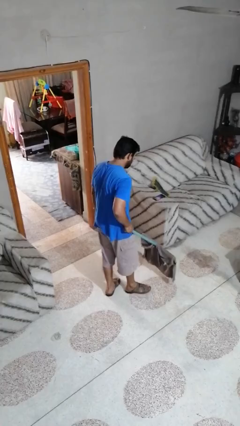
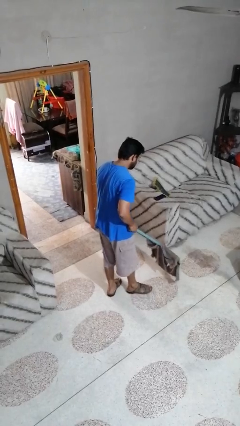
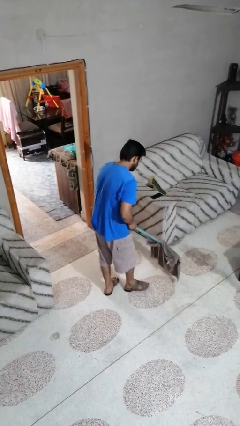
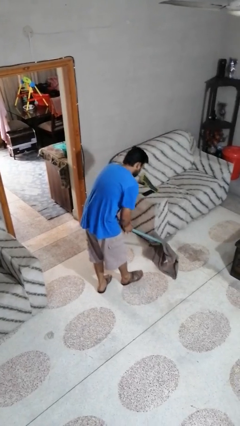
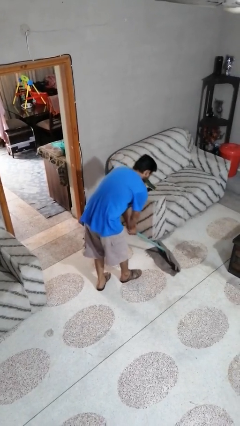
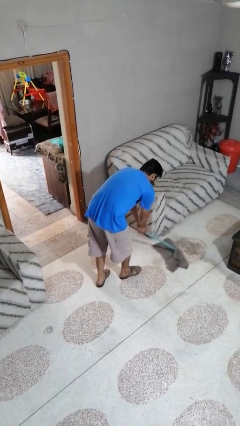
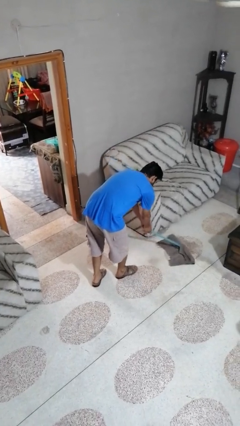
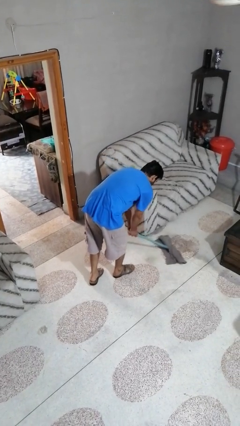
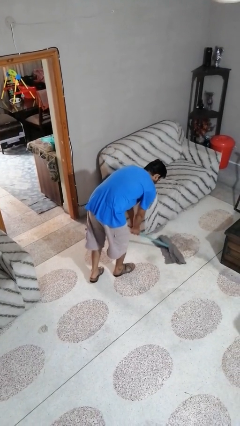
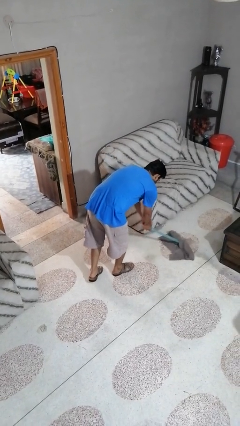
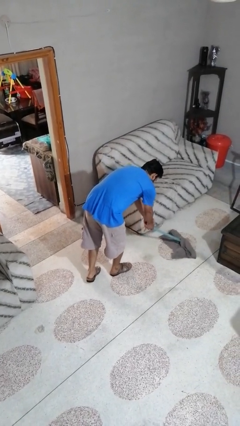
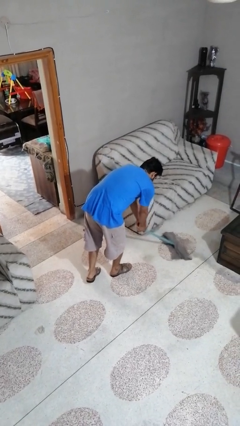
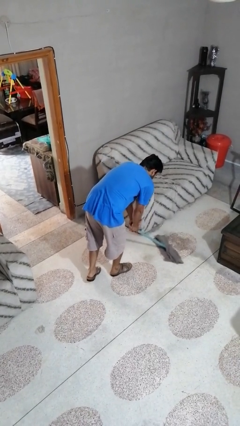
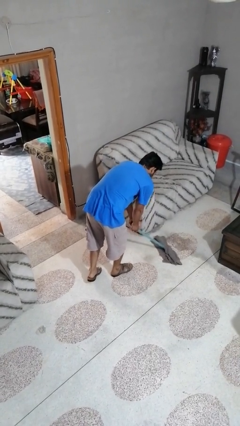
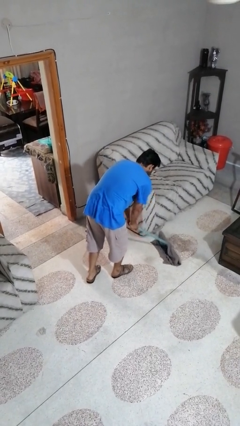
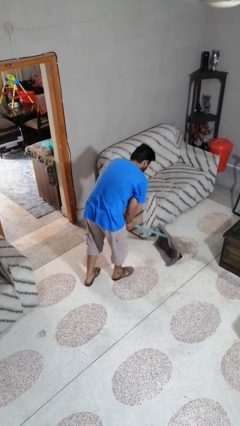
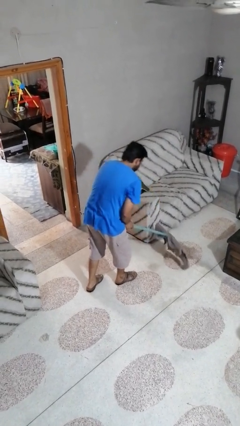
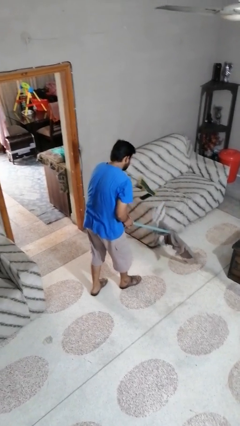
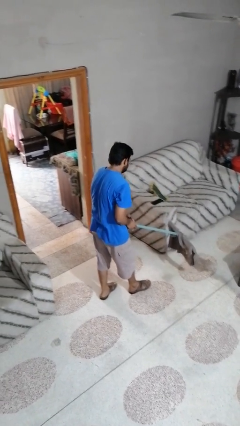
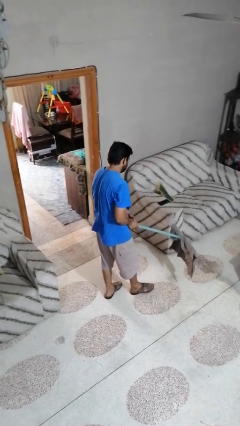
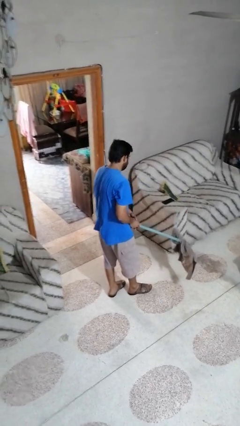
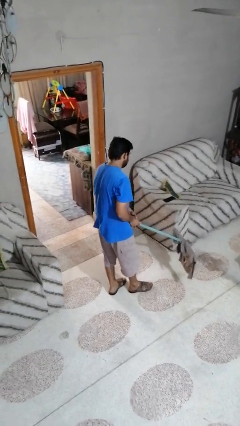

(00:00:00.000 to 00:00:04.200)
person mops

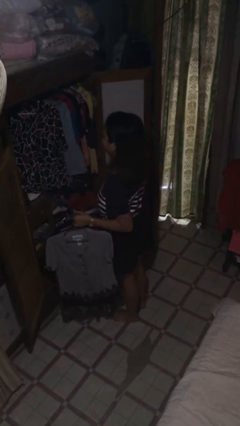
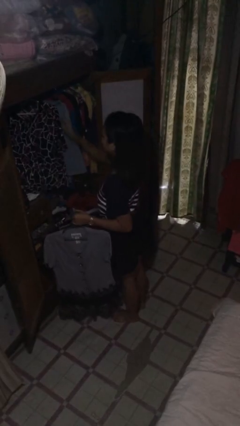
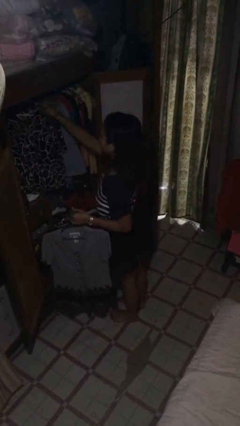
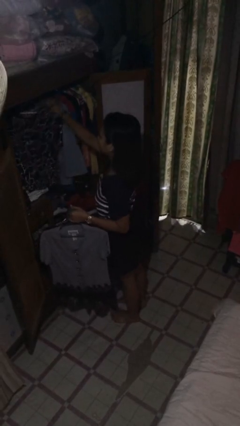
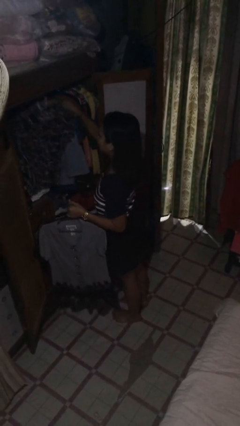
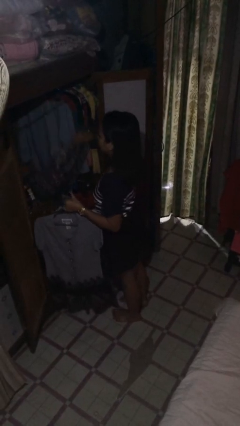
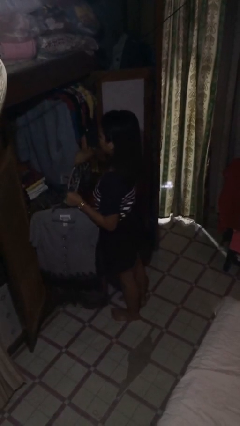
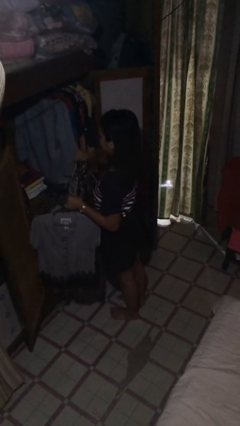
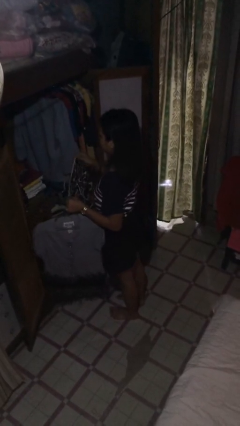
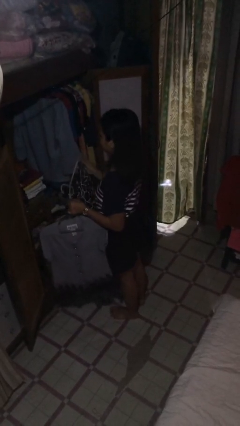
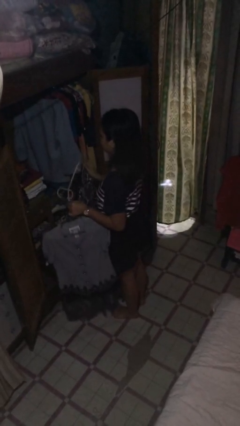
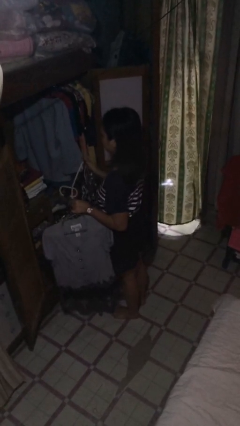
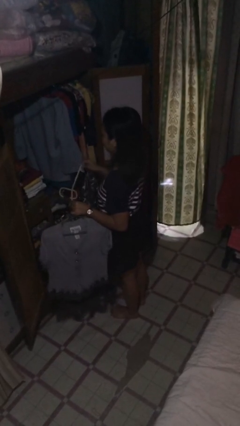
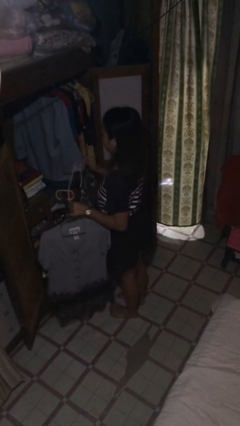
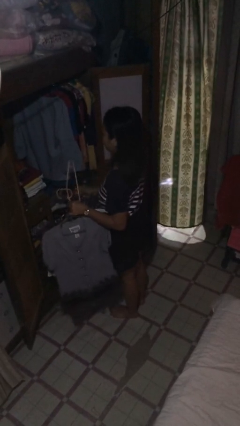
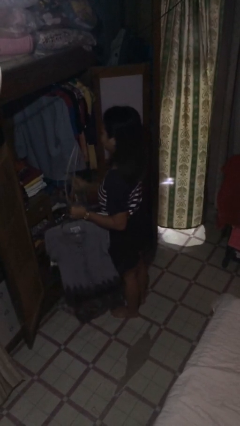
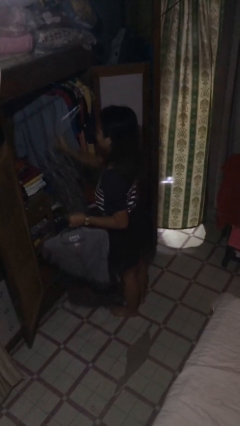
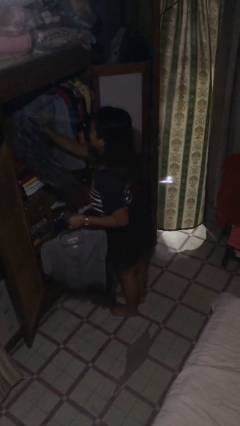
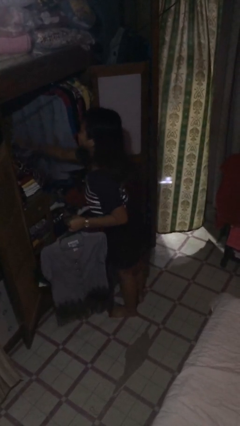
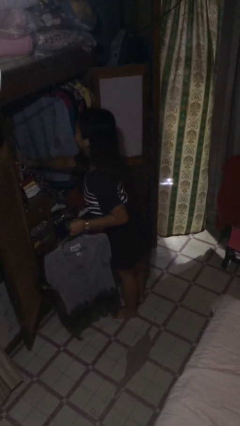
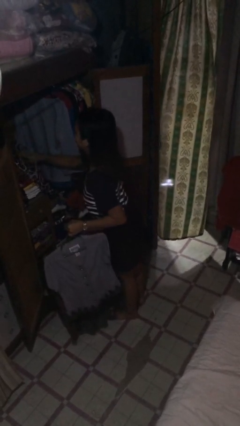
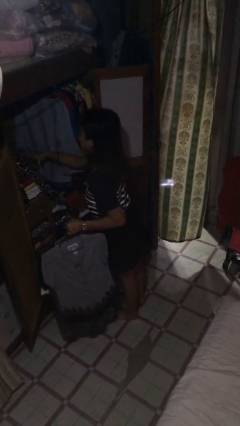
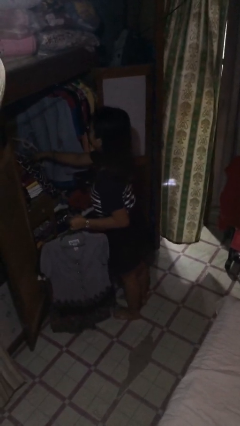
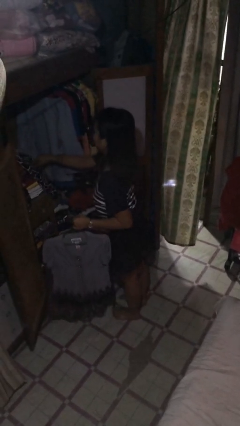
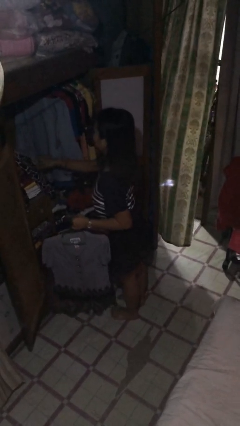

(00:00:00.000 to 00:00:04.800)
person takes clothes from closet

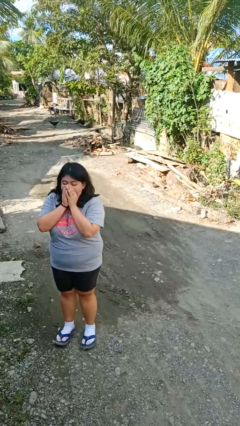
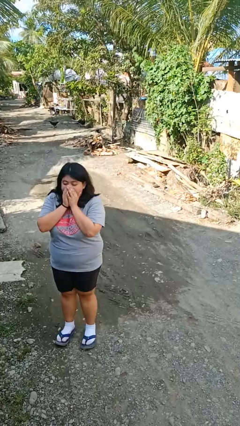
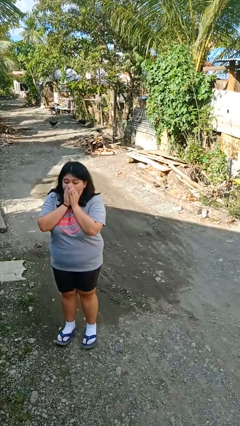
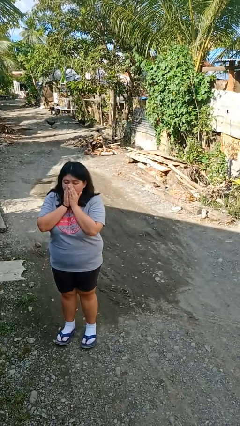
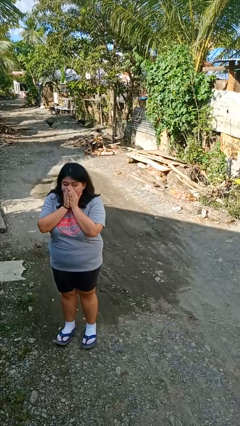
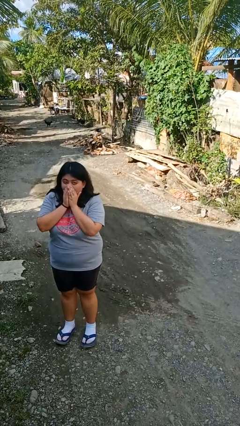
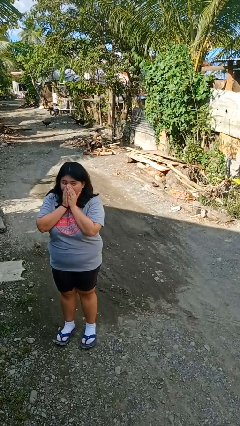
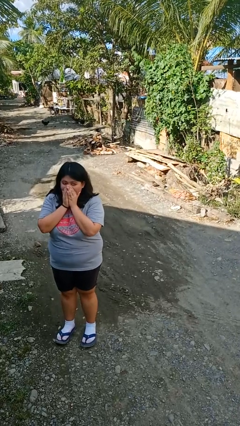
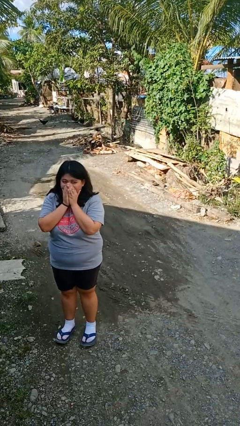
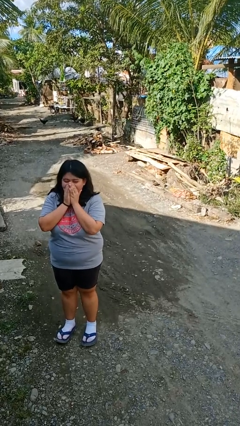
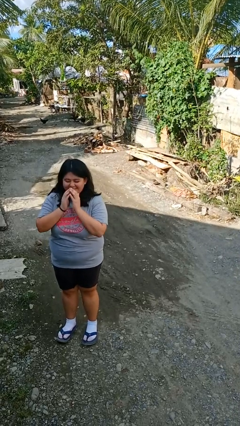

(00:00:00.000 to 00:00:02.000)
person blows into hands

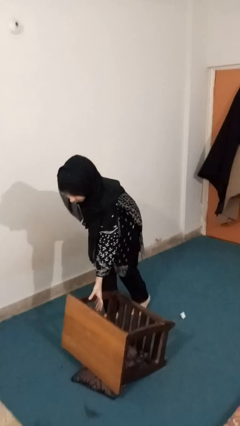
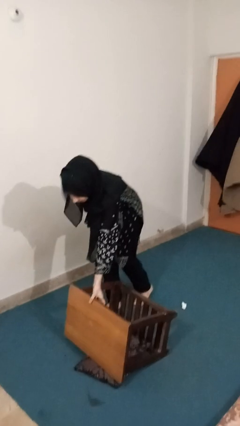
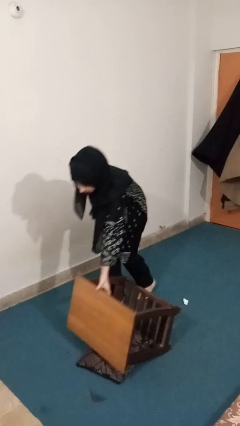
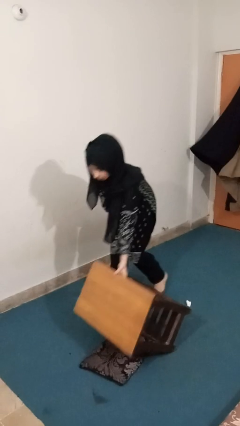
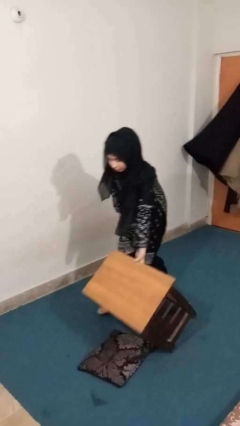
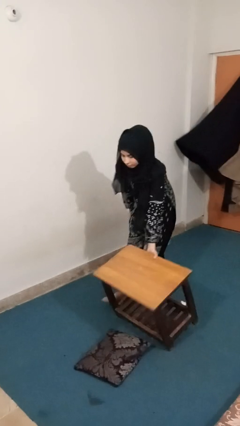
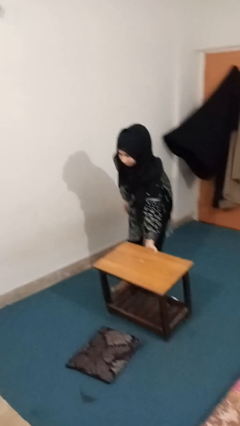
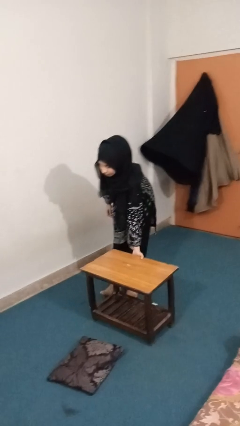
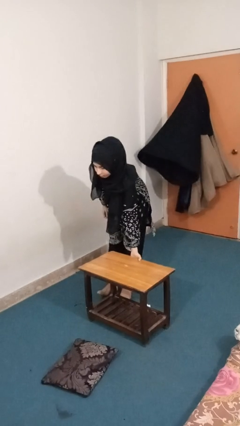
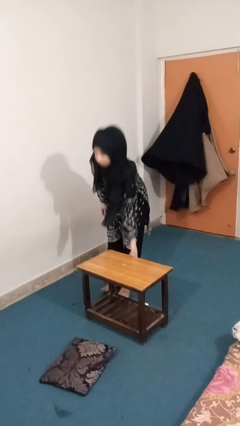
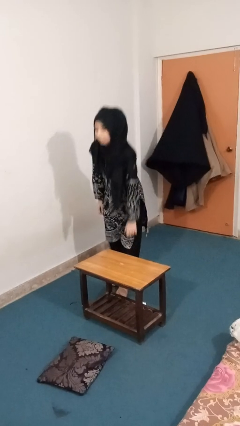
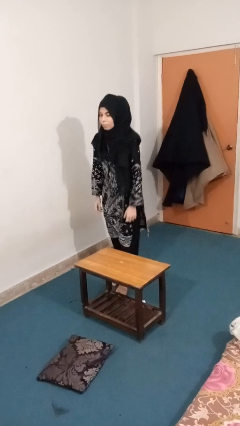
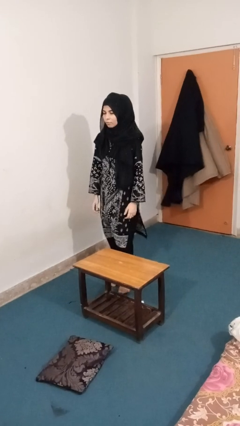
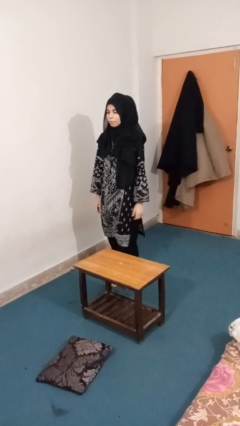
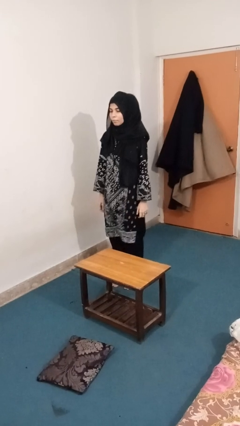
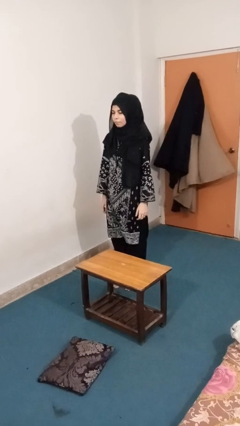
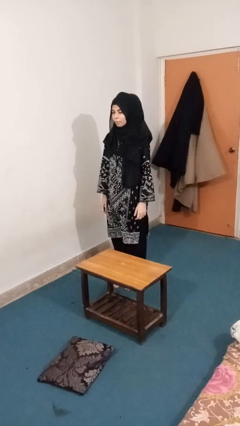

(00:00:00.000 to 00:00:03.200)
person sets upright furniture

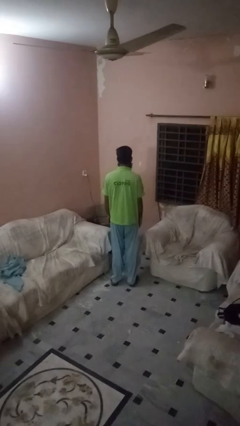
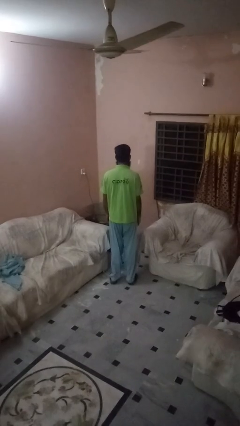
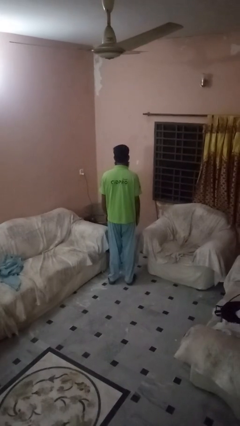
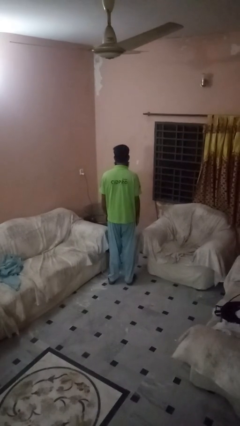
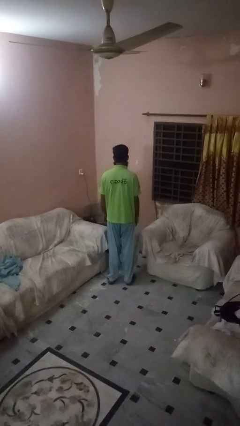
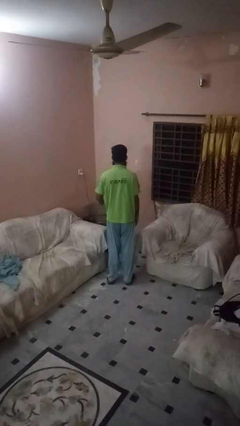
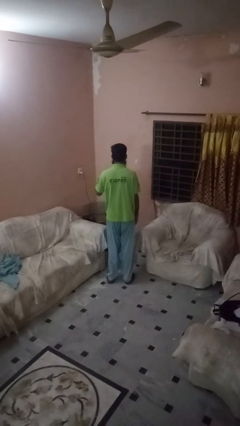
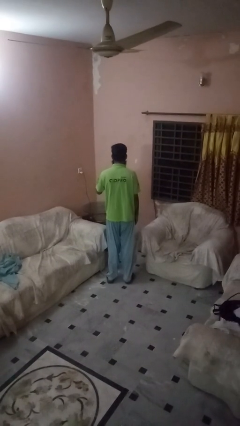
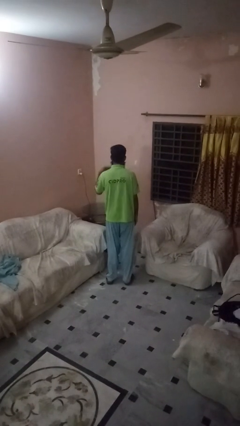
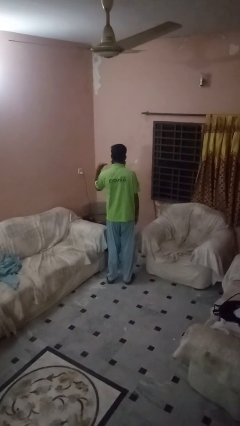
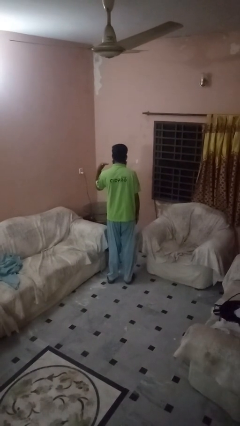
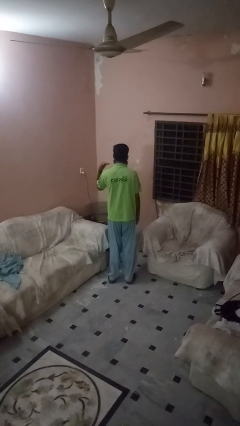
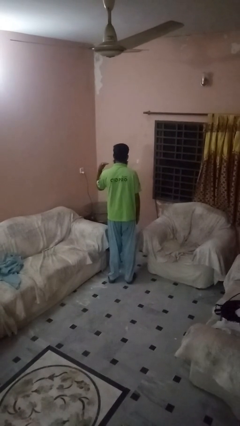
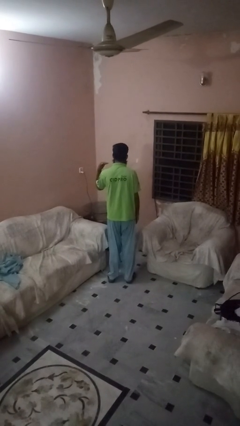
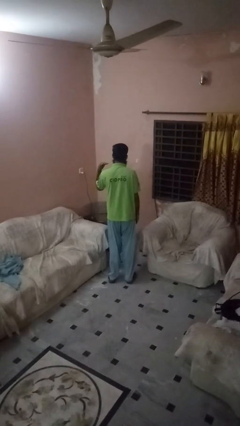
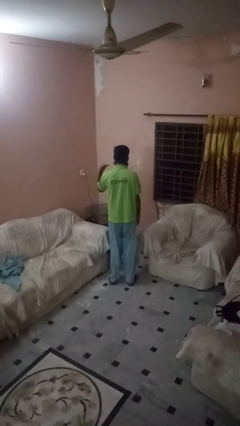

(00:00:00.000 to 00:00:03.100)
person gestures cut

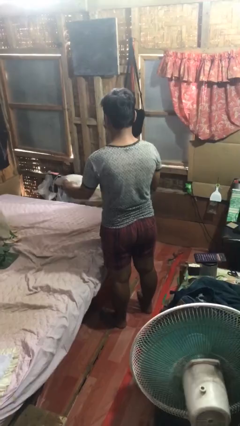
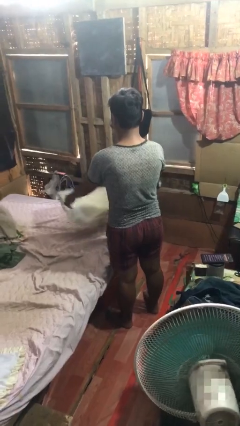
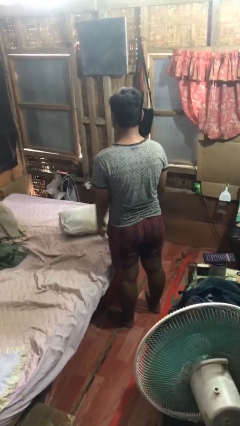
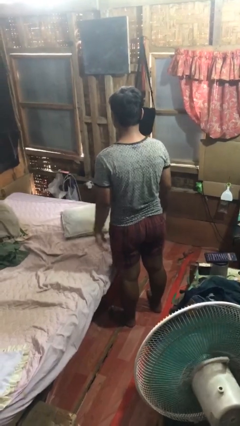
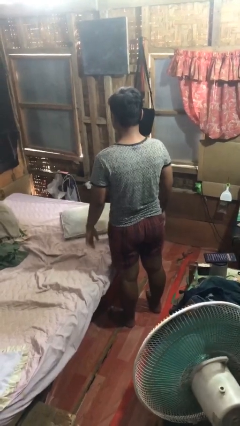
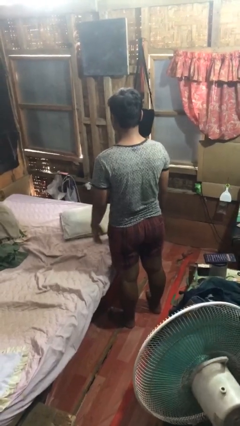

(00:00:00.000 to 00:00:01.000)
person puts down object on bed
